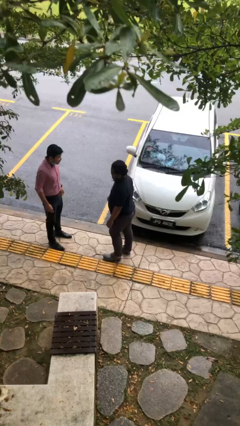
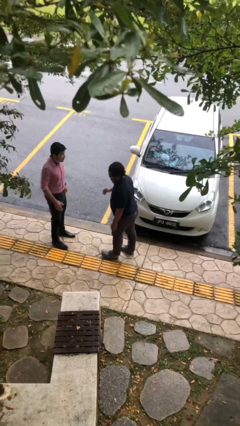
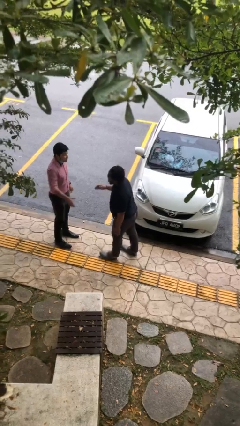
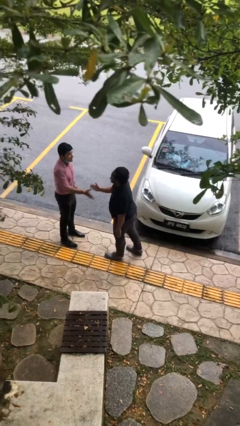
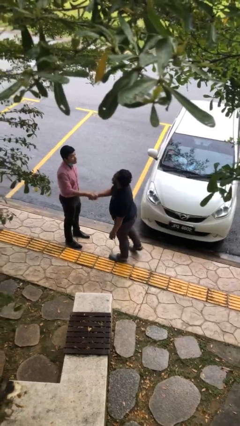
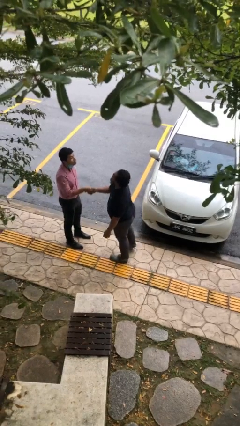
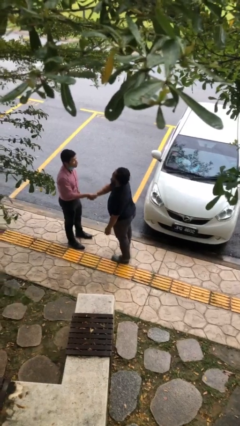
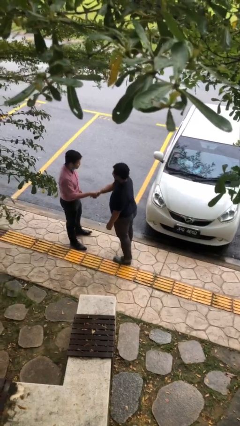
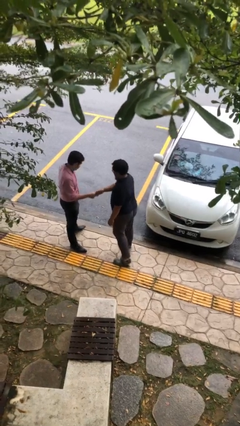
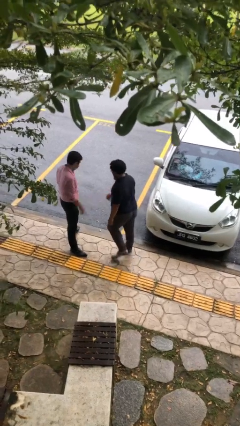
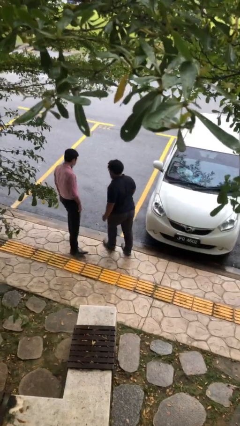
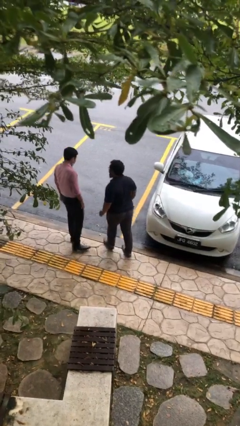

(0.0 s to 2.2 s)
person shakes hand

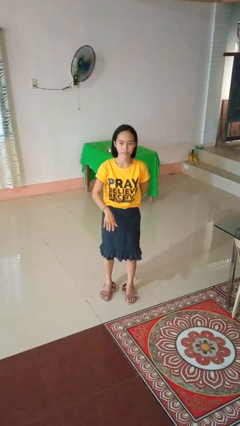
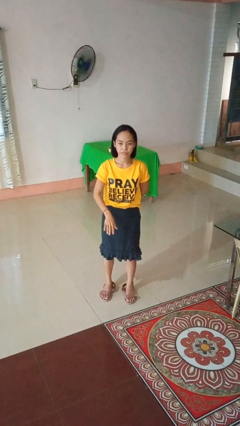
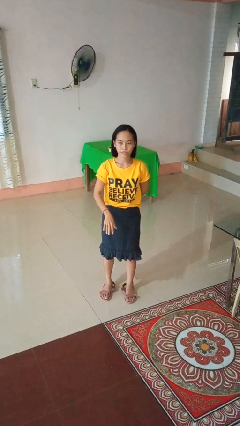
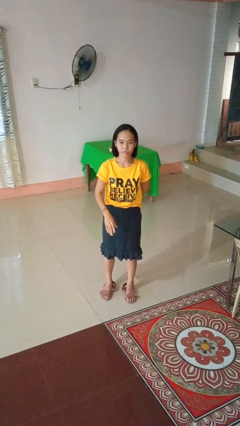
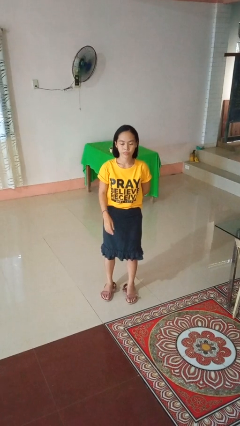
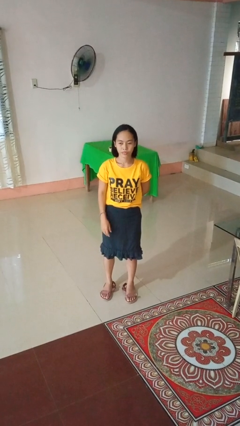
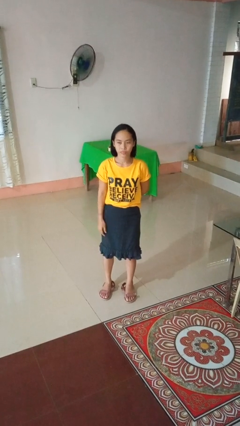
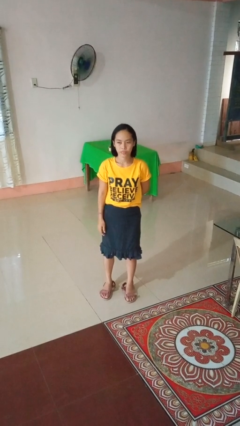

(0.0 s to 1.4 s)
person gestures swipe down

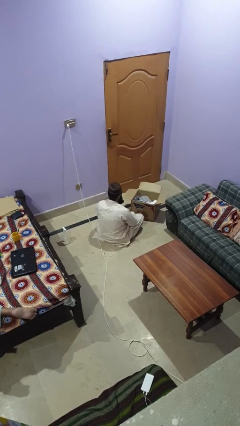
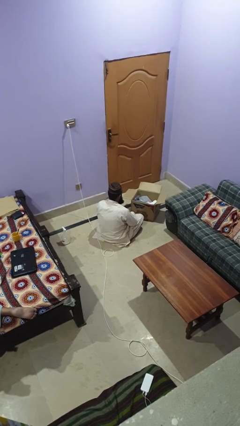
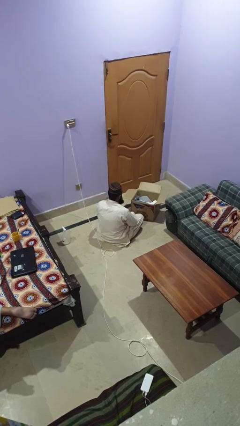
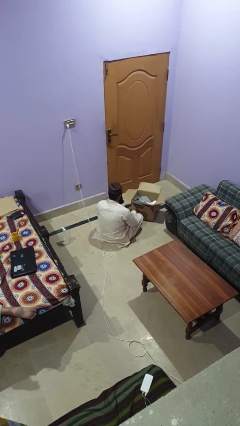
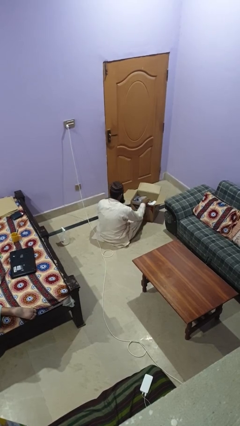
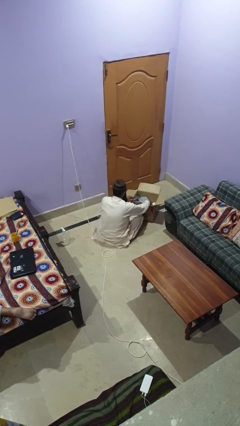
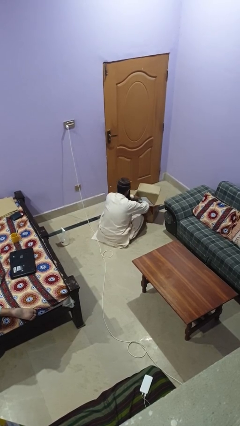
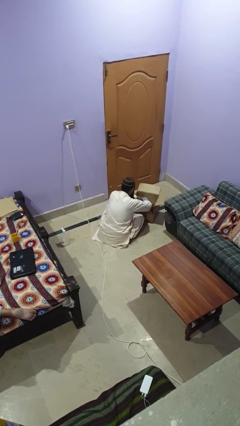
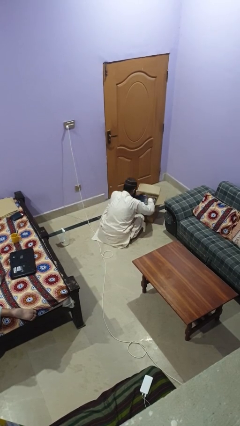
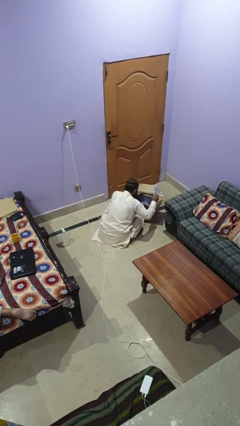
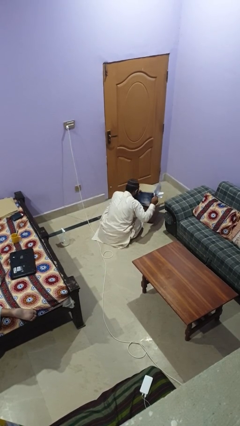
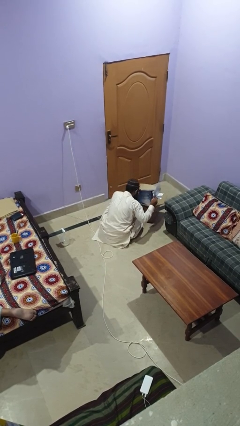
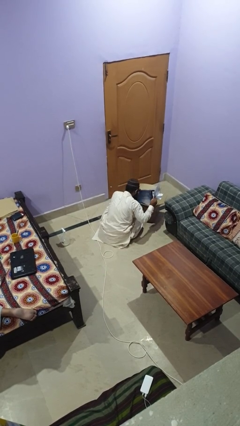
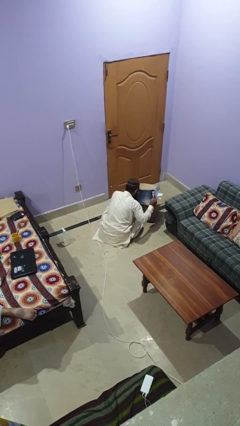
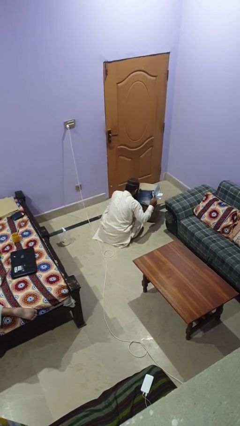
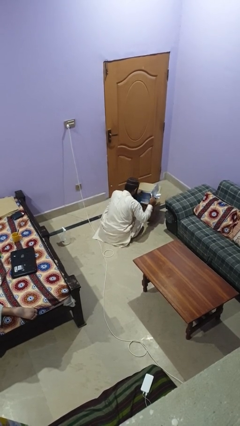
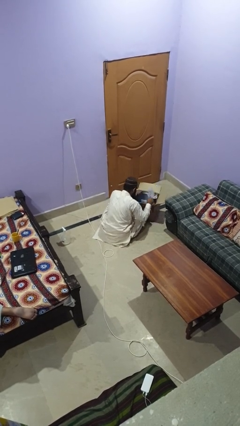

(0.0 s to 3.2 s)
person searches in box

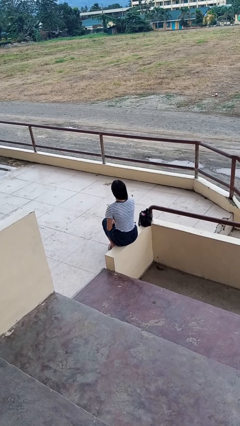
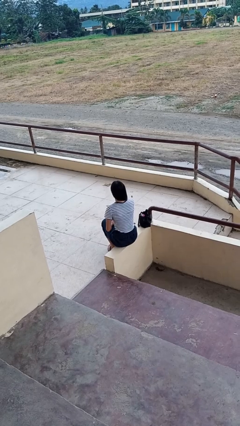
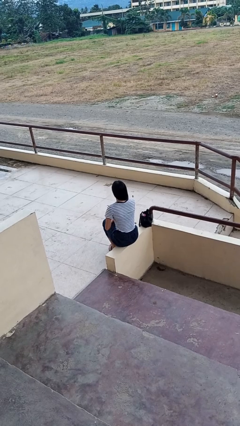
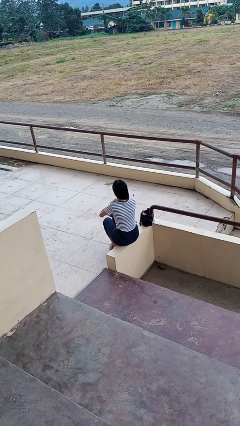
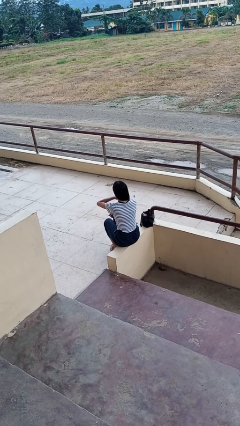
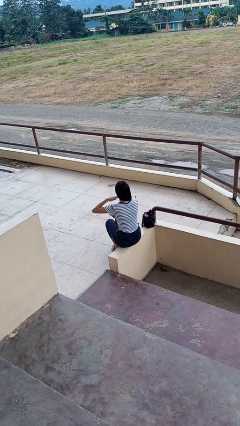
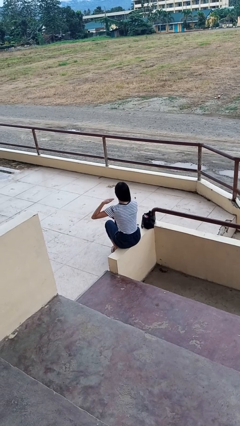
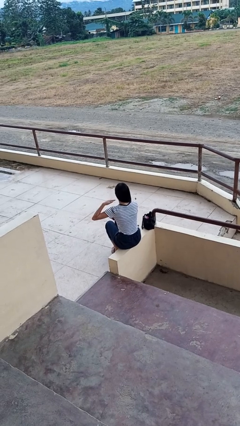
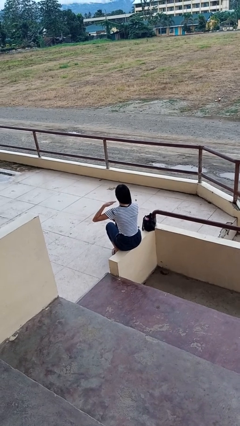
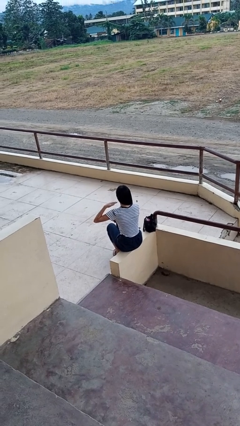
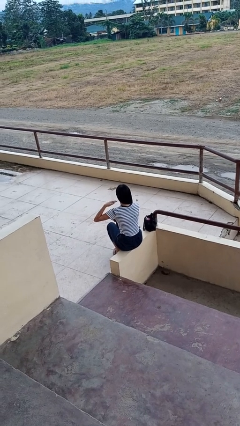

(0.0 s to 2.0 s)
person gestures cut

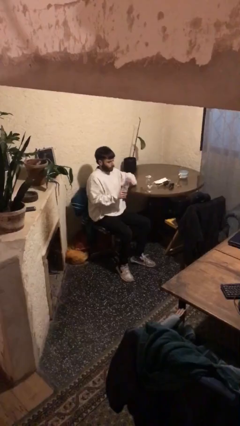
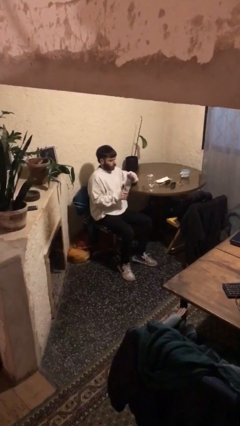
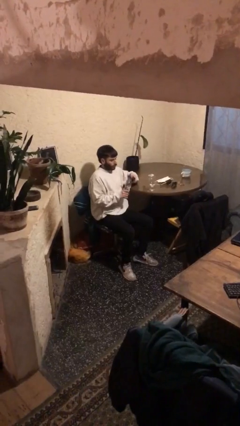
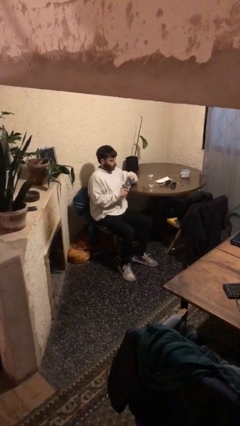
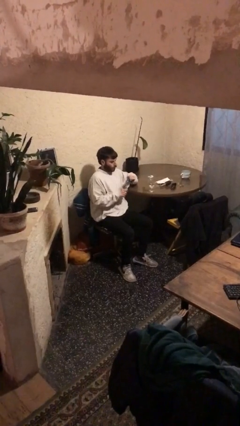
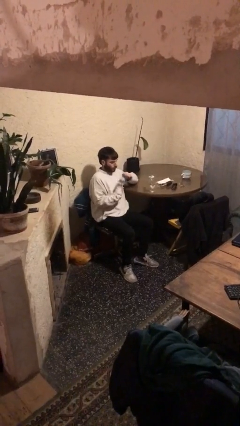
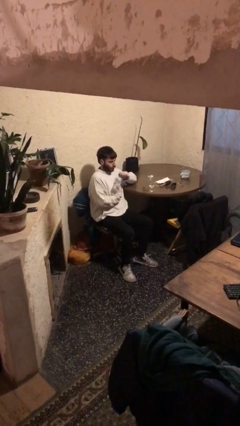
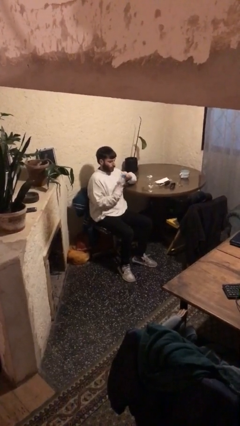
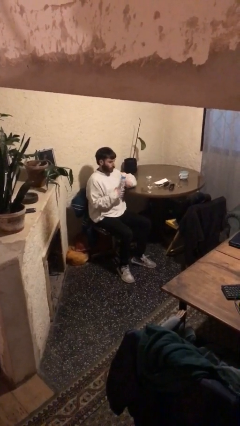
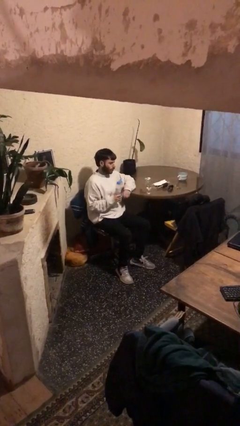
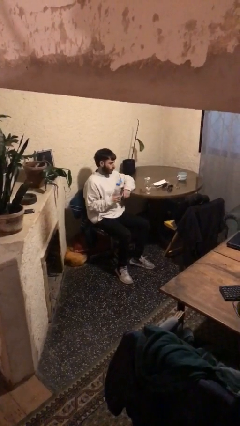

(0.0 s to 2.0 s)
person screws lid to bottle

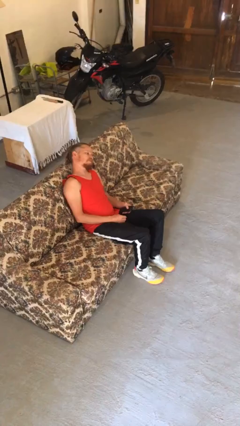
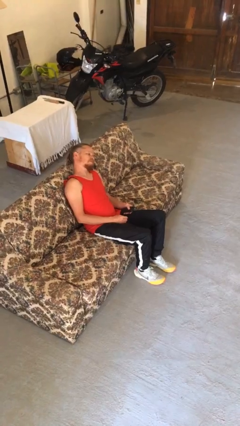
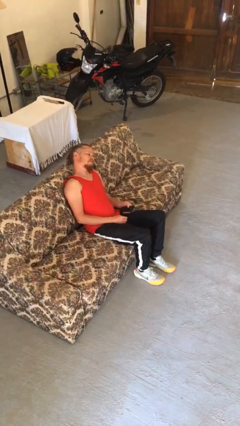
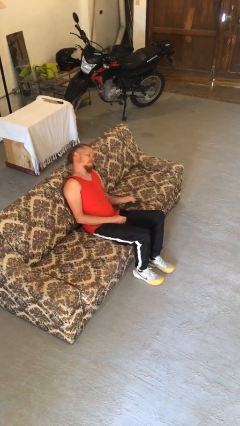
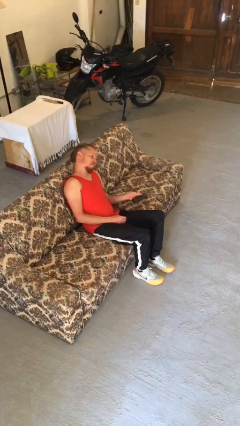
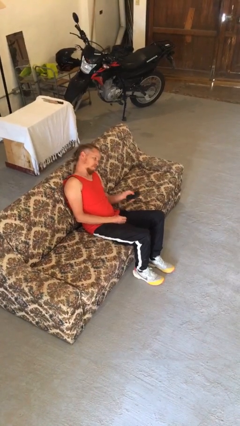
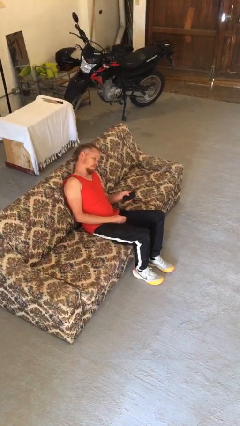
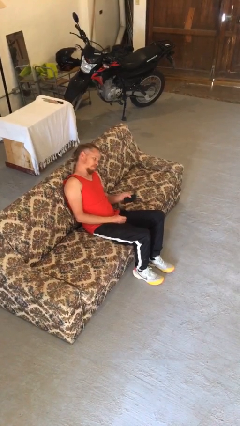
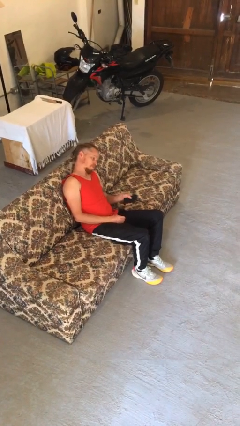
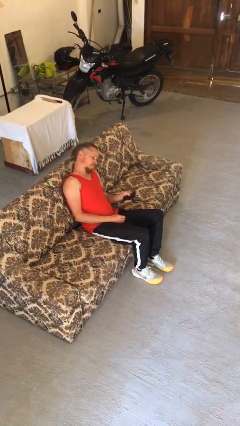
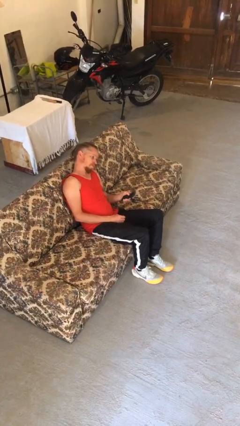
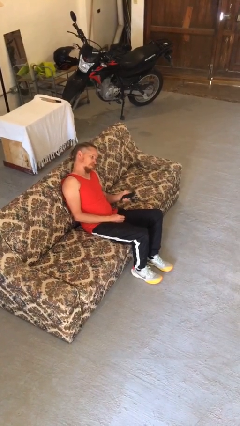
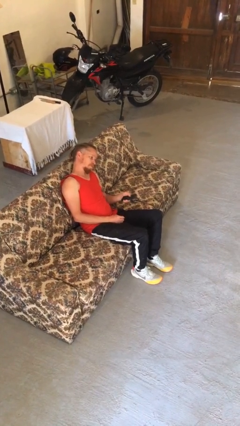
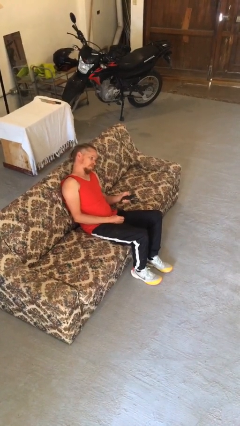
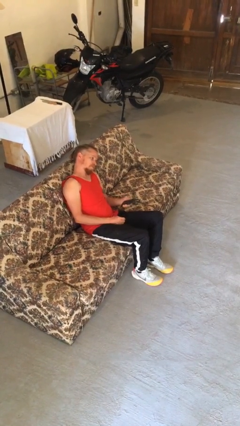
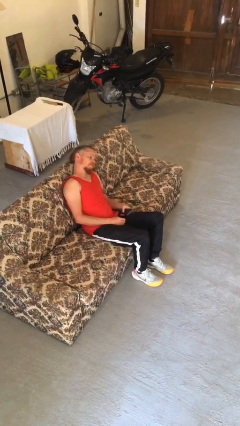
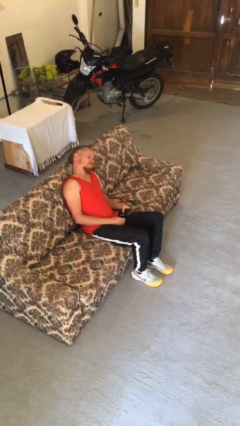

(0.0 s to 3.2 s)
person uses television remote

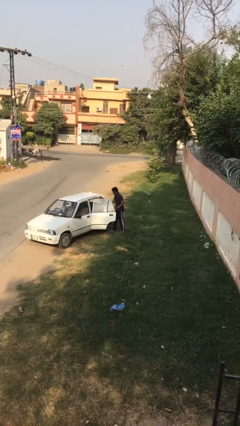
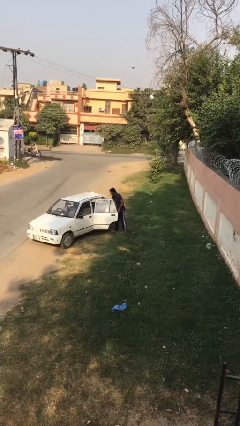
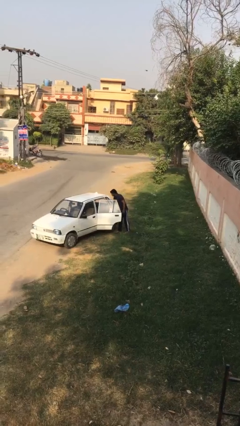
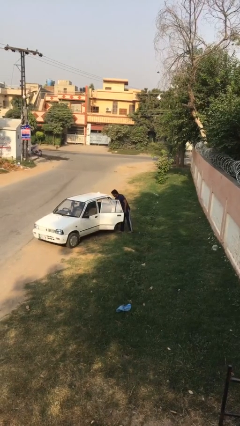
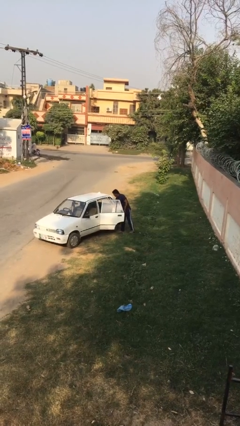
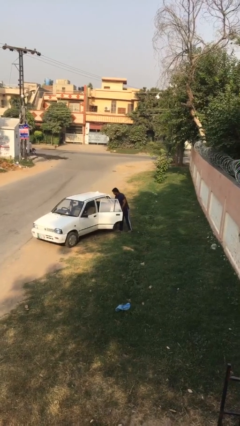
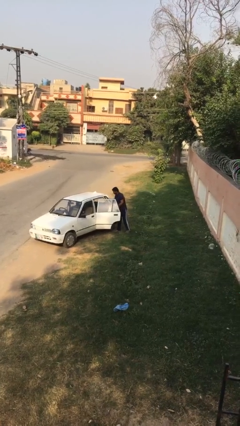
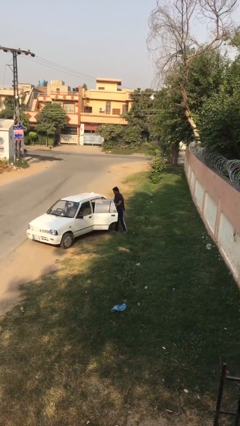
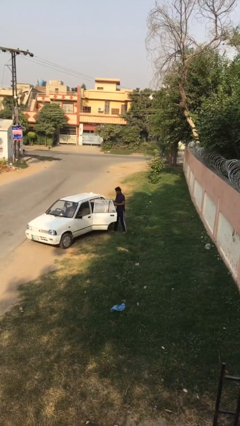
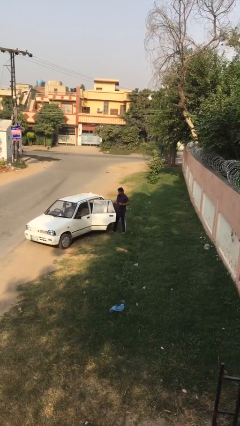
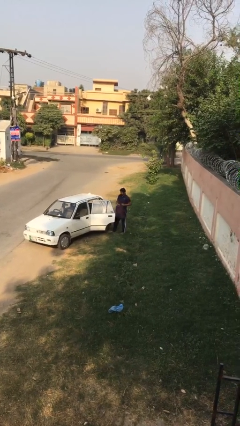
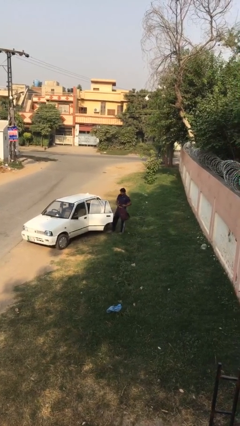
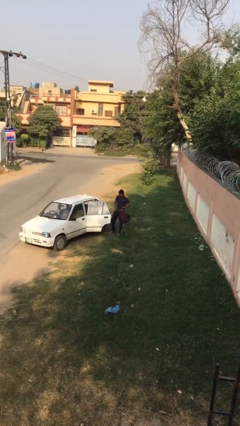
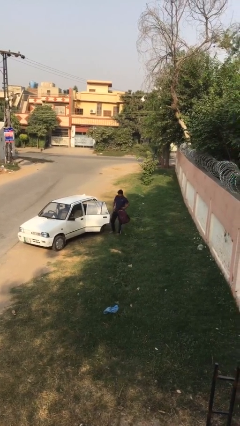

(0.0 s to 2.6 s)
person unloads car

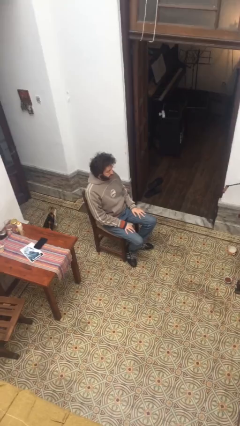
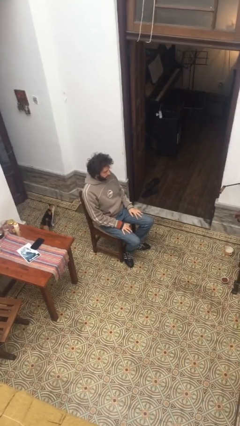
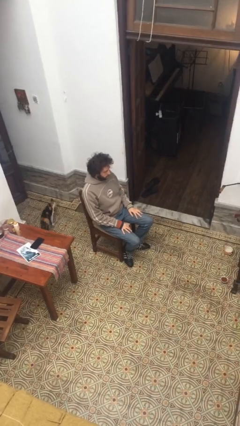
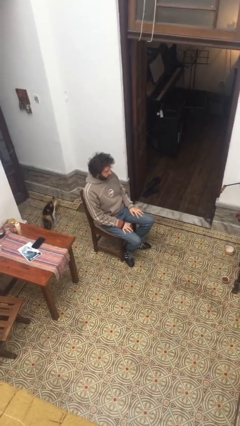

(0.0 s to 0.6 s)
person sits down
